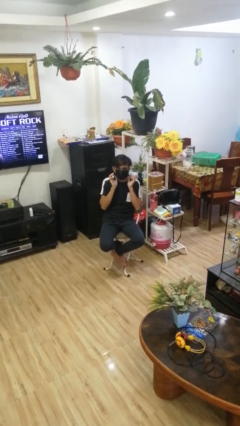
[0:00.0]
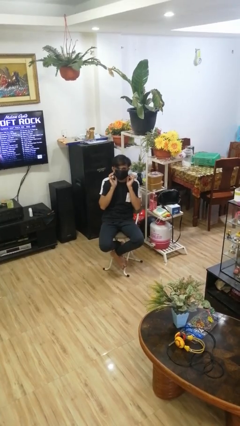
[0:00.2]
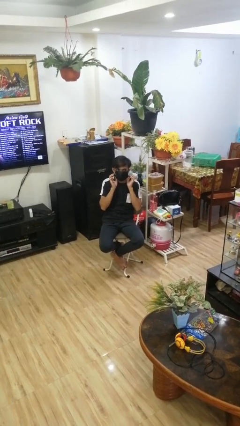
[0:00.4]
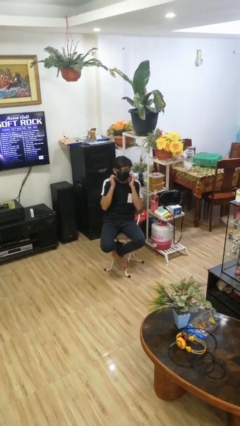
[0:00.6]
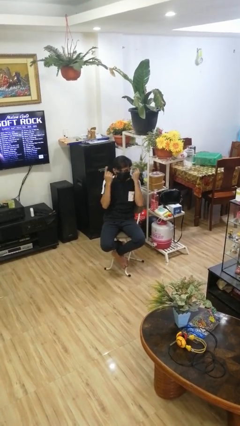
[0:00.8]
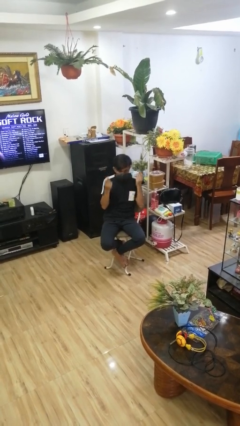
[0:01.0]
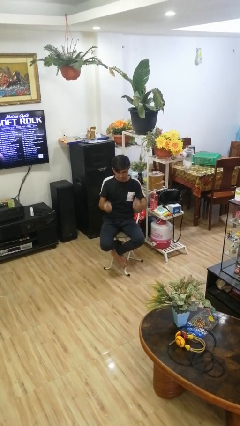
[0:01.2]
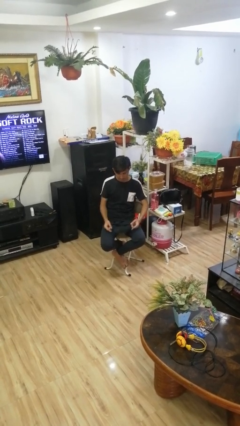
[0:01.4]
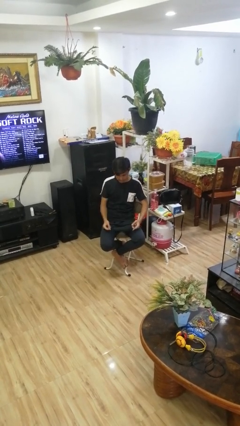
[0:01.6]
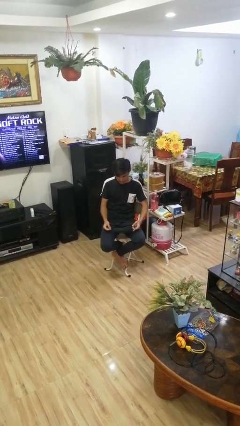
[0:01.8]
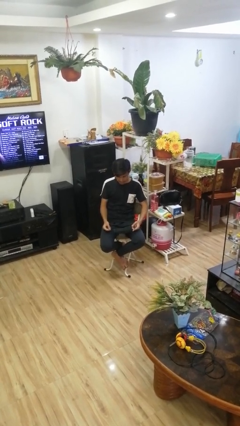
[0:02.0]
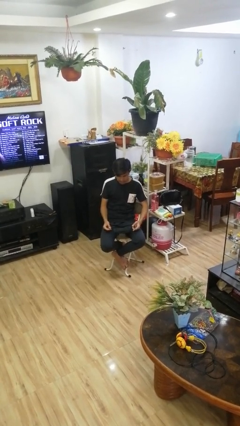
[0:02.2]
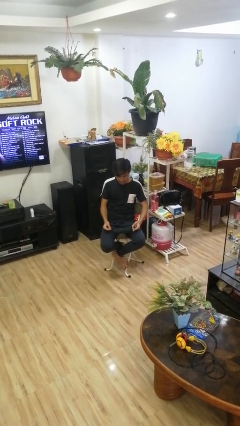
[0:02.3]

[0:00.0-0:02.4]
person takes off facemask

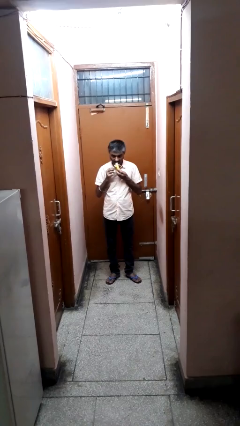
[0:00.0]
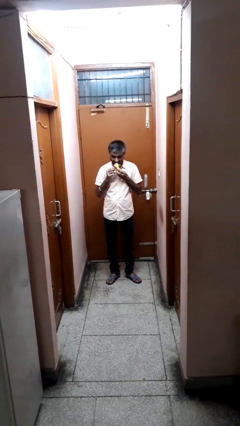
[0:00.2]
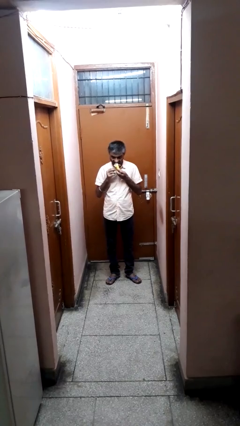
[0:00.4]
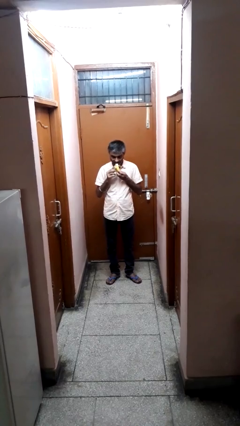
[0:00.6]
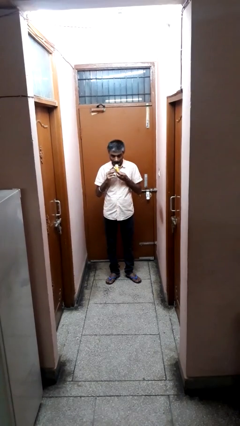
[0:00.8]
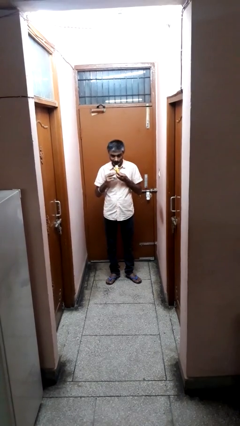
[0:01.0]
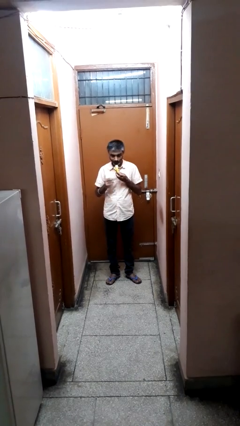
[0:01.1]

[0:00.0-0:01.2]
person eats banana

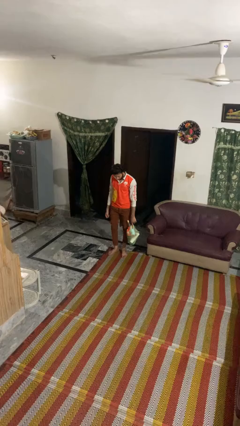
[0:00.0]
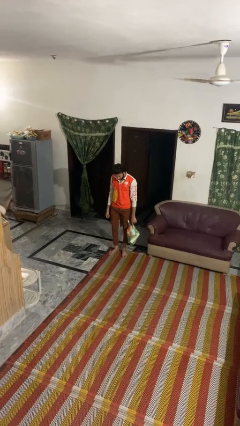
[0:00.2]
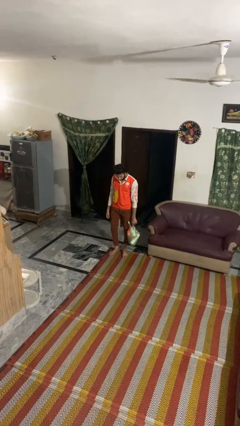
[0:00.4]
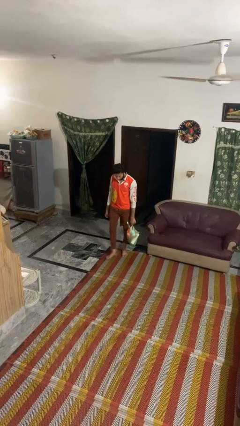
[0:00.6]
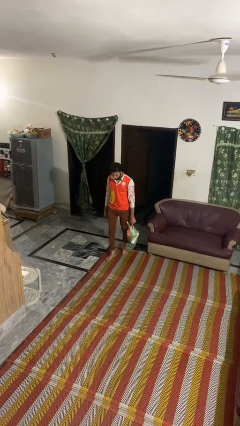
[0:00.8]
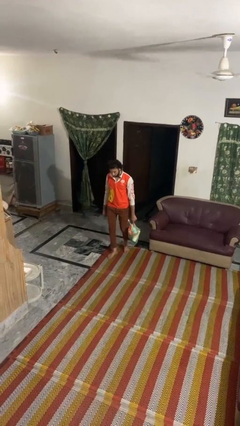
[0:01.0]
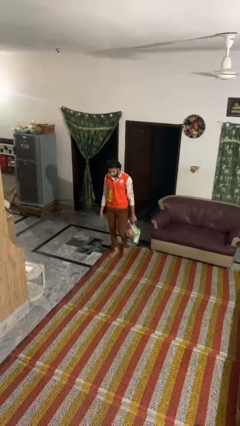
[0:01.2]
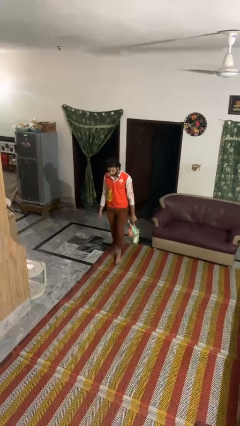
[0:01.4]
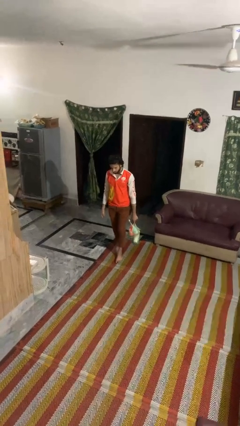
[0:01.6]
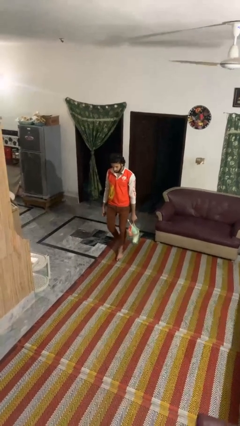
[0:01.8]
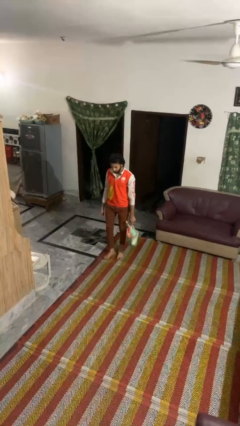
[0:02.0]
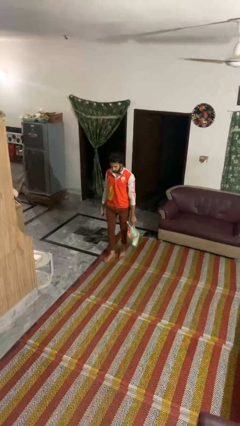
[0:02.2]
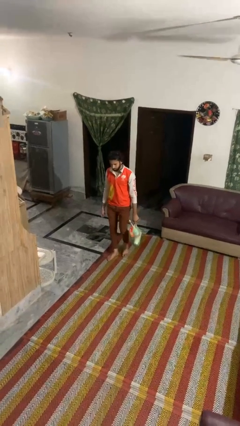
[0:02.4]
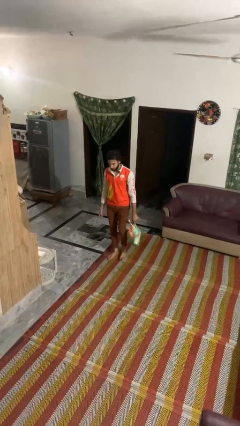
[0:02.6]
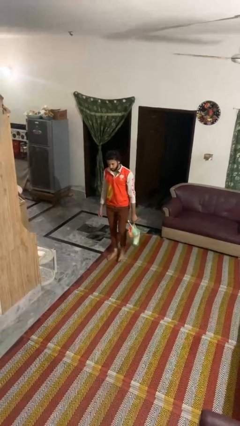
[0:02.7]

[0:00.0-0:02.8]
person carries groceries

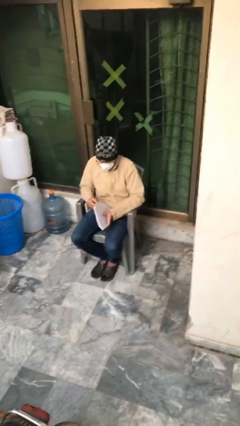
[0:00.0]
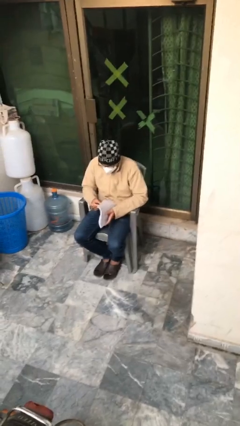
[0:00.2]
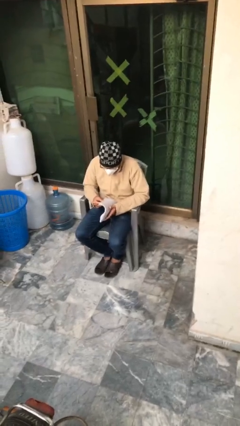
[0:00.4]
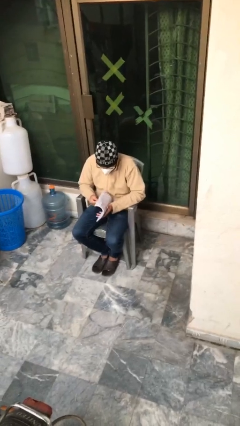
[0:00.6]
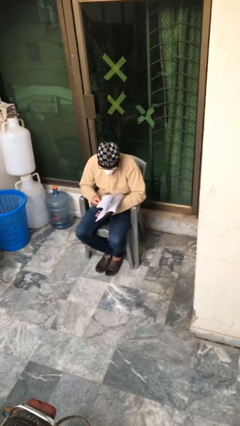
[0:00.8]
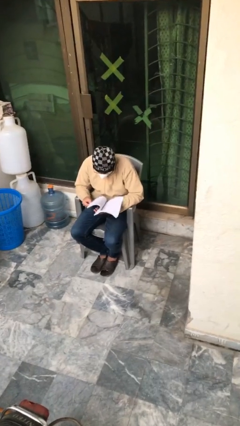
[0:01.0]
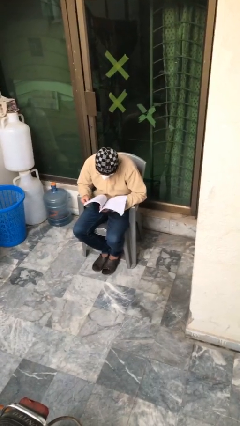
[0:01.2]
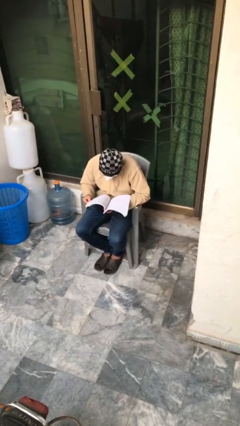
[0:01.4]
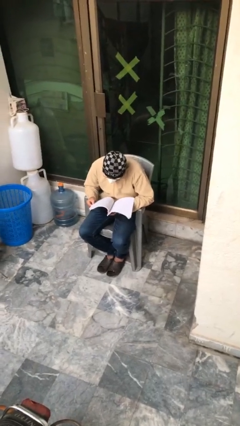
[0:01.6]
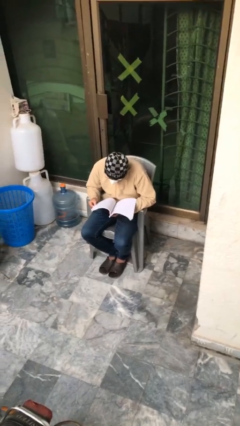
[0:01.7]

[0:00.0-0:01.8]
person reads document

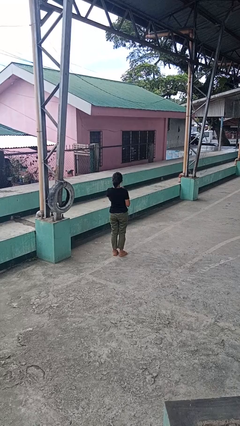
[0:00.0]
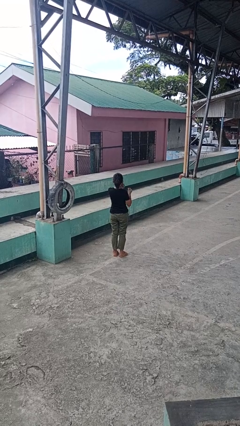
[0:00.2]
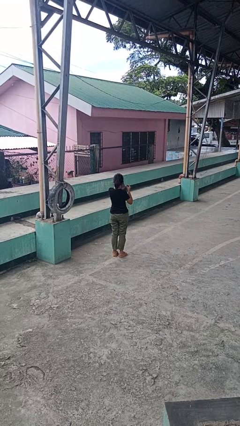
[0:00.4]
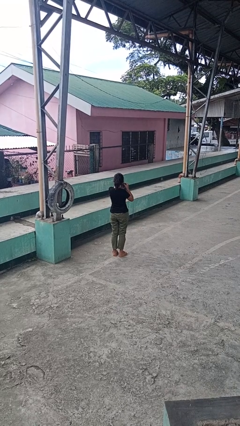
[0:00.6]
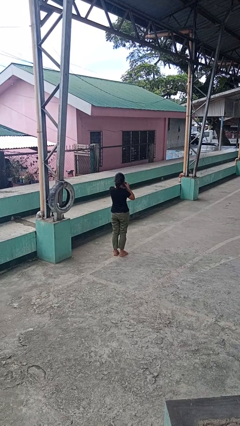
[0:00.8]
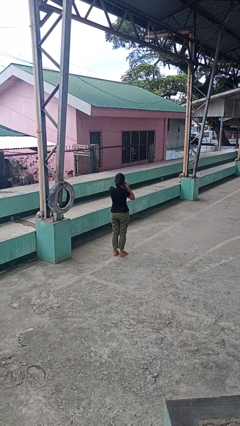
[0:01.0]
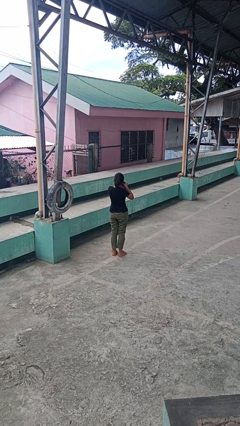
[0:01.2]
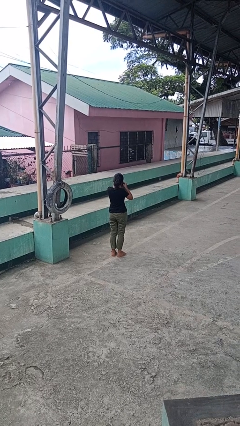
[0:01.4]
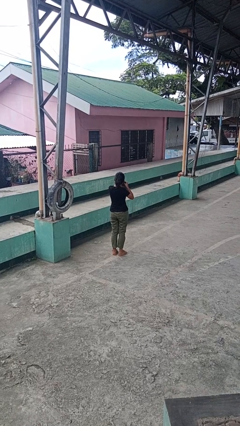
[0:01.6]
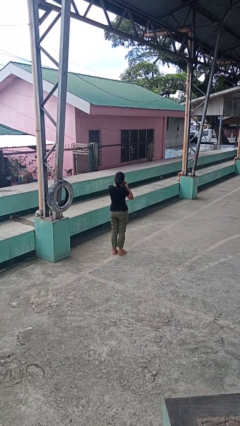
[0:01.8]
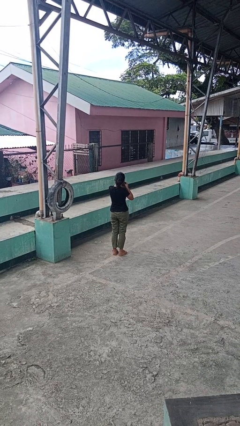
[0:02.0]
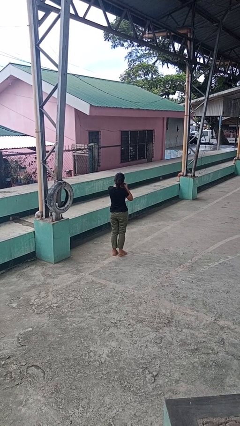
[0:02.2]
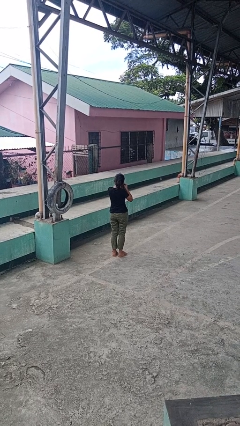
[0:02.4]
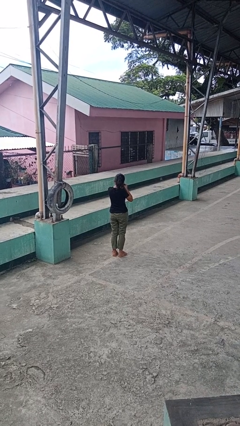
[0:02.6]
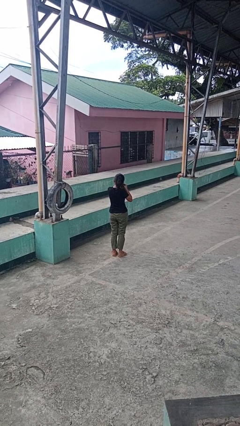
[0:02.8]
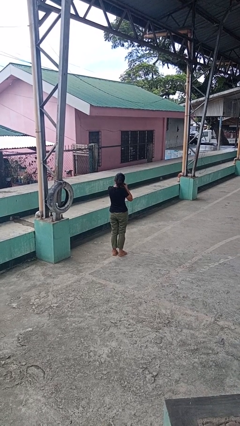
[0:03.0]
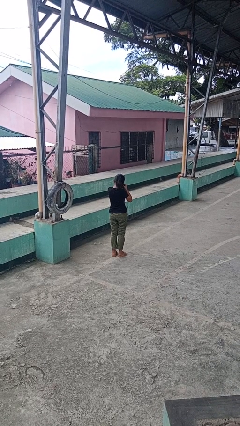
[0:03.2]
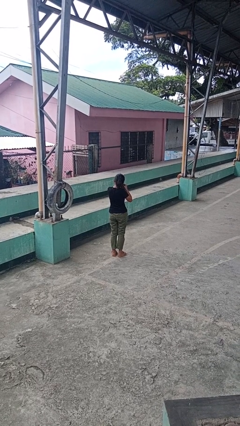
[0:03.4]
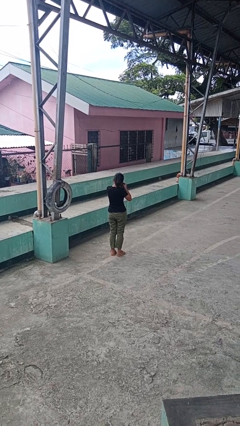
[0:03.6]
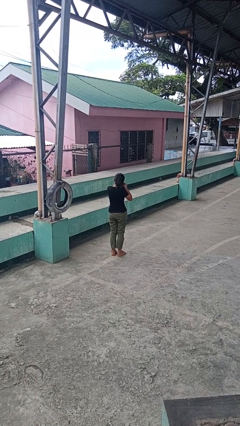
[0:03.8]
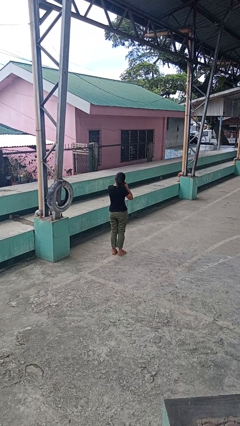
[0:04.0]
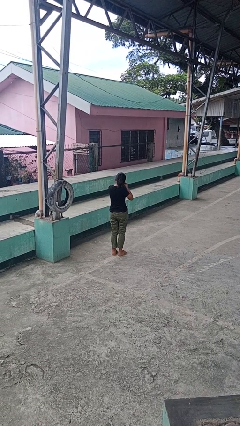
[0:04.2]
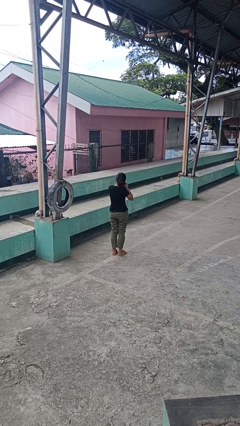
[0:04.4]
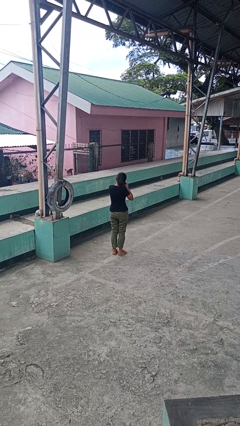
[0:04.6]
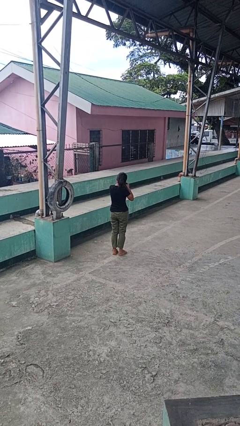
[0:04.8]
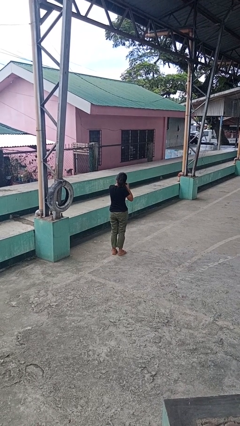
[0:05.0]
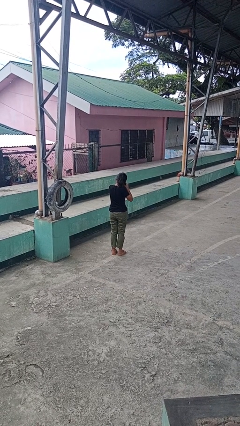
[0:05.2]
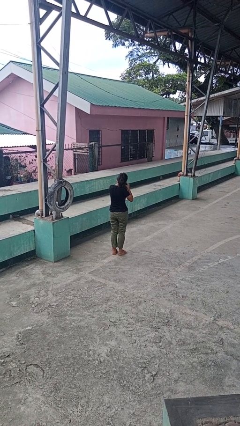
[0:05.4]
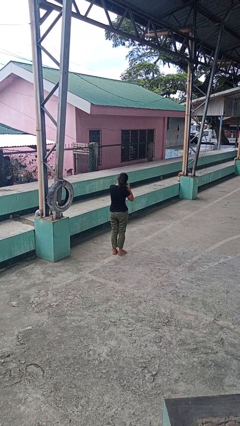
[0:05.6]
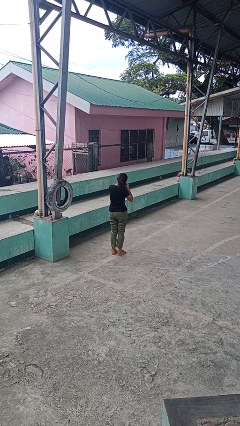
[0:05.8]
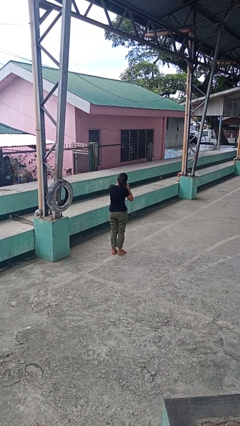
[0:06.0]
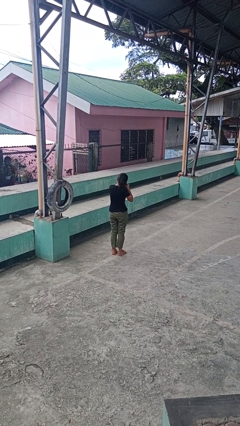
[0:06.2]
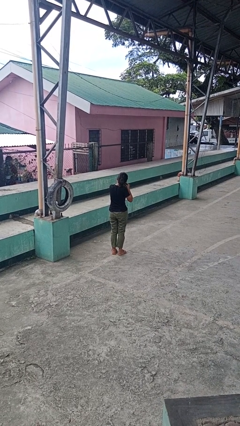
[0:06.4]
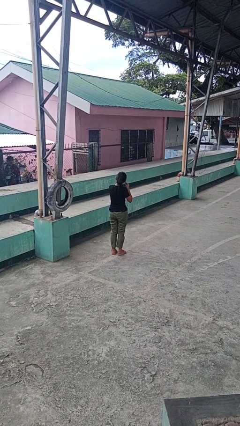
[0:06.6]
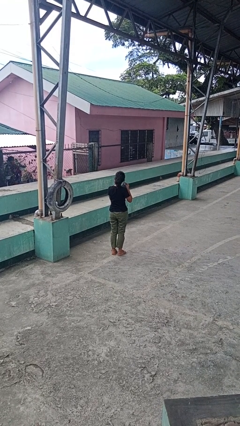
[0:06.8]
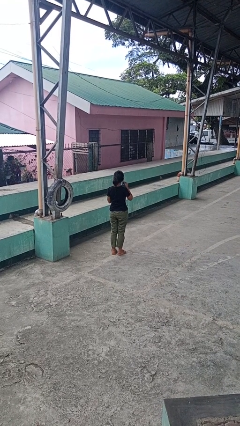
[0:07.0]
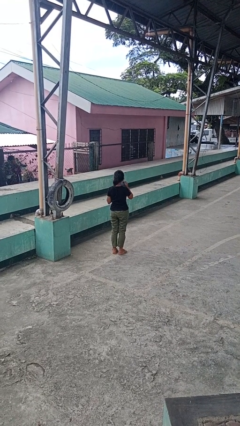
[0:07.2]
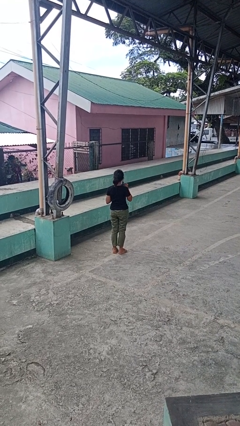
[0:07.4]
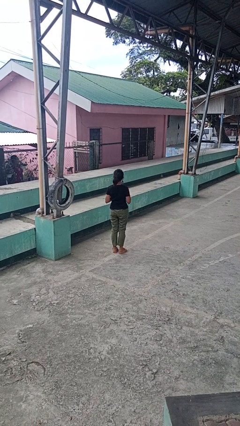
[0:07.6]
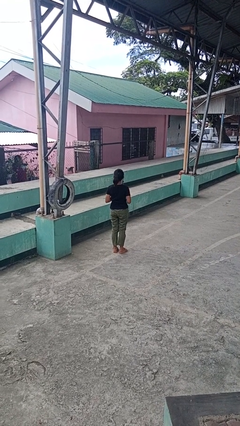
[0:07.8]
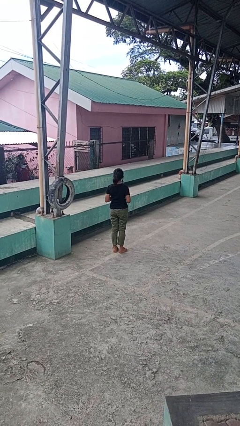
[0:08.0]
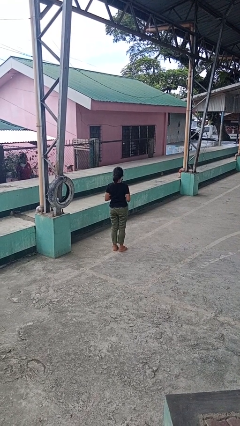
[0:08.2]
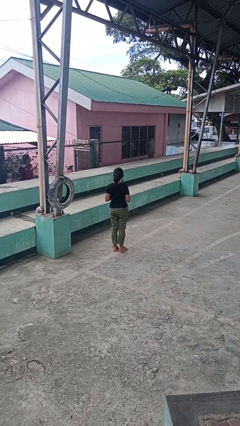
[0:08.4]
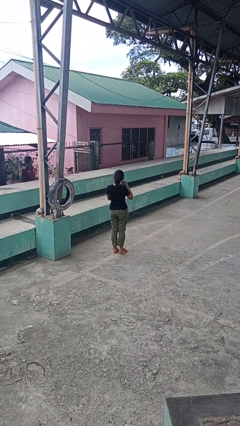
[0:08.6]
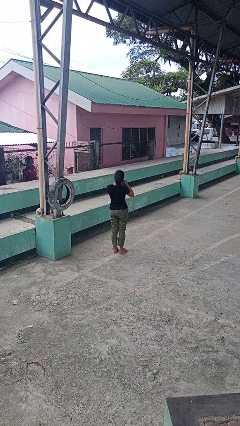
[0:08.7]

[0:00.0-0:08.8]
person puts on earrings

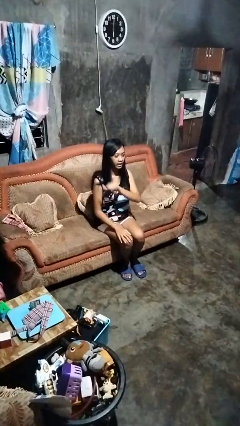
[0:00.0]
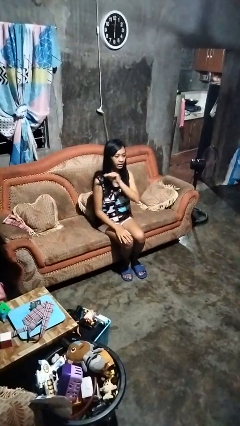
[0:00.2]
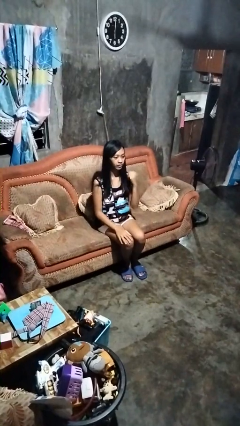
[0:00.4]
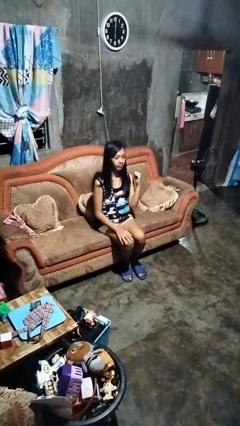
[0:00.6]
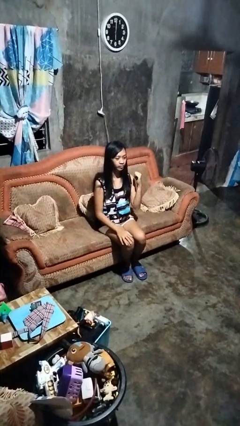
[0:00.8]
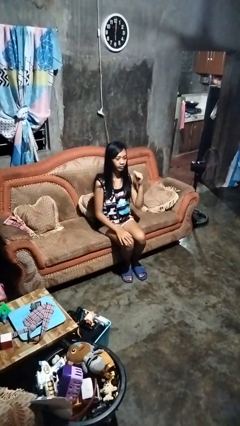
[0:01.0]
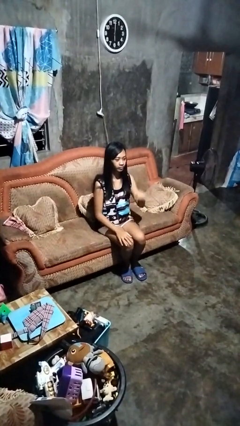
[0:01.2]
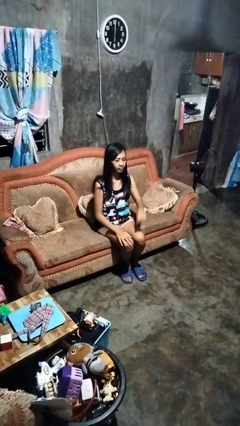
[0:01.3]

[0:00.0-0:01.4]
person gestures cut
